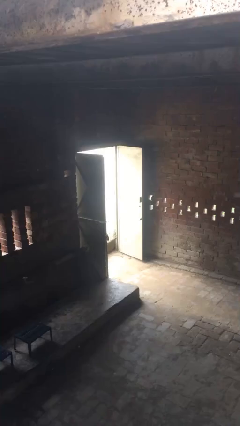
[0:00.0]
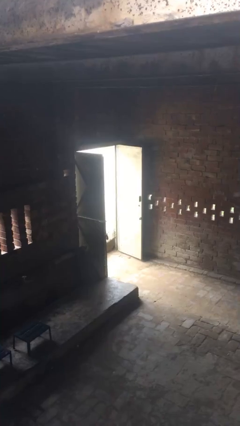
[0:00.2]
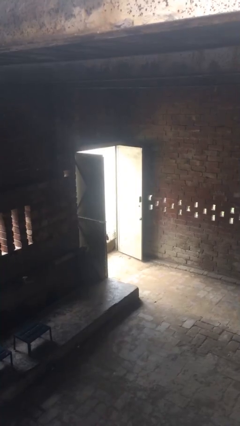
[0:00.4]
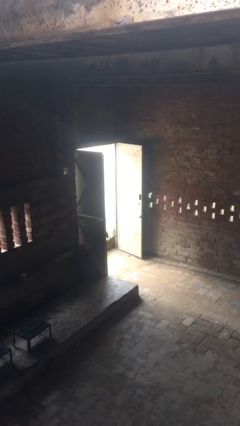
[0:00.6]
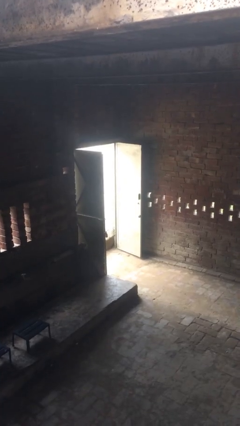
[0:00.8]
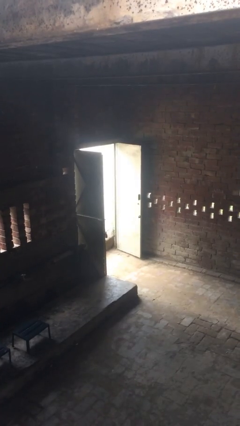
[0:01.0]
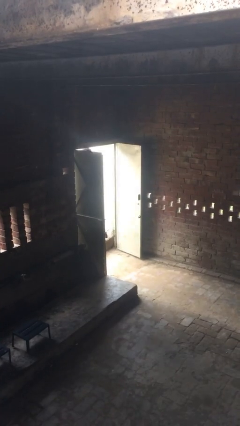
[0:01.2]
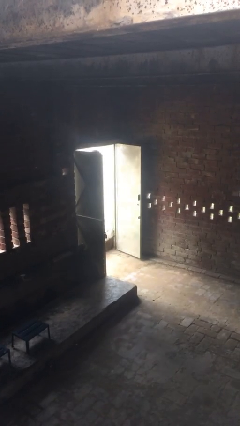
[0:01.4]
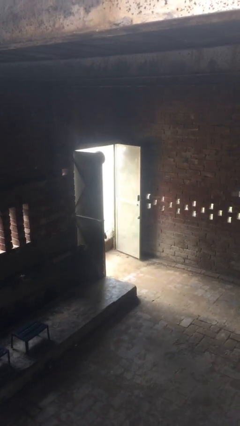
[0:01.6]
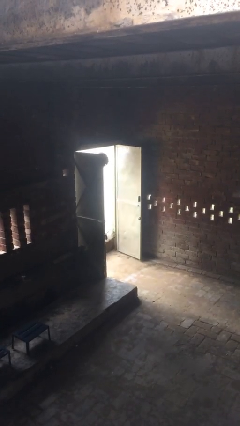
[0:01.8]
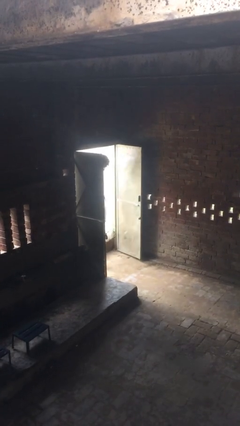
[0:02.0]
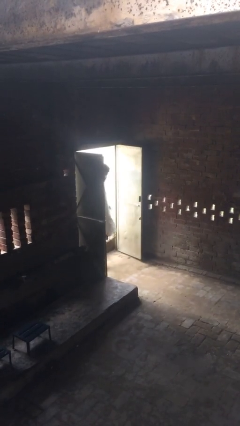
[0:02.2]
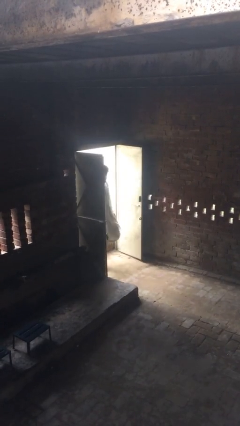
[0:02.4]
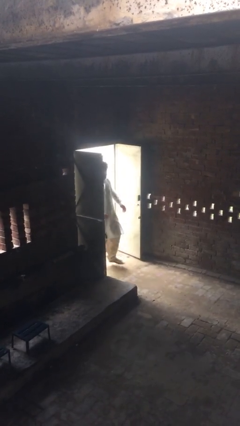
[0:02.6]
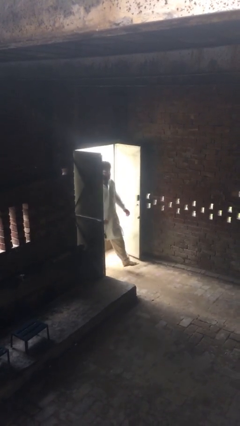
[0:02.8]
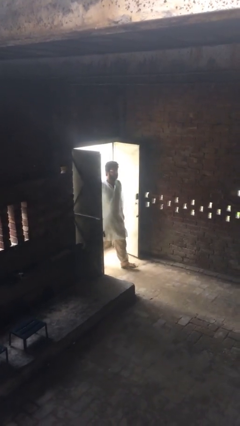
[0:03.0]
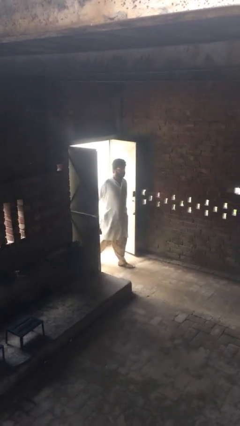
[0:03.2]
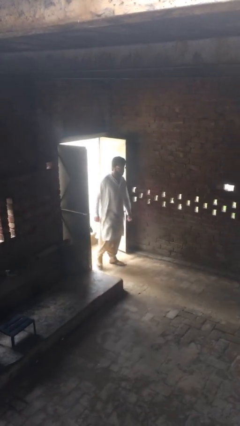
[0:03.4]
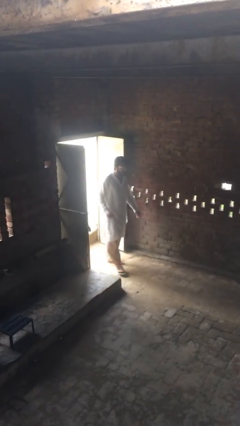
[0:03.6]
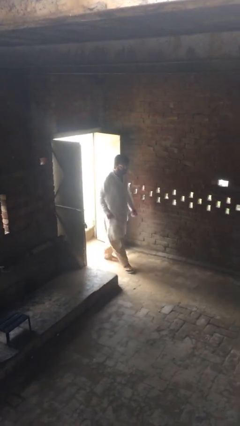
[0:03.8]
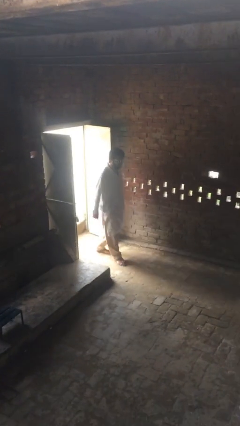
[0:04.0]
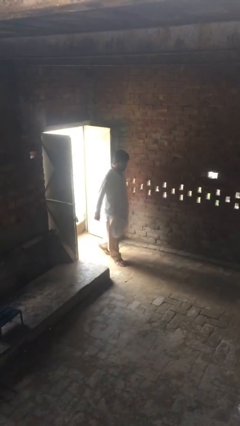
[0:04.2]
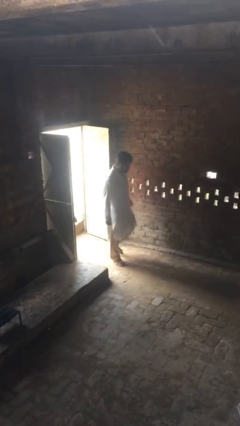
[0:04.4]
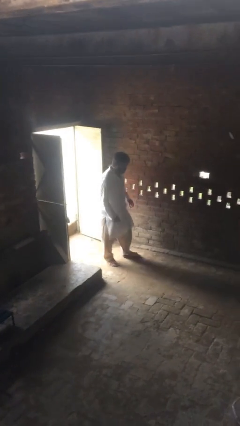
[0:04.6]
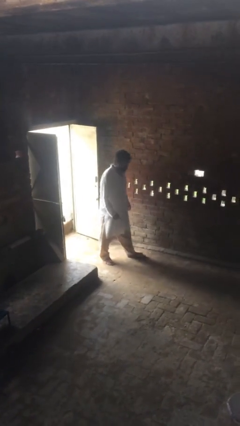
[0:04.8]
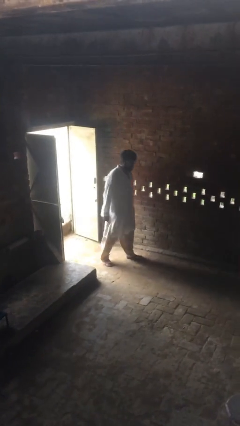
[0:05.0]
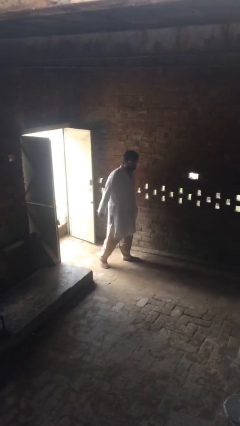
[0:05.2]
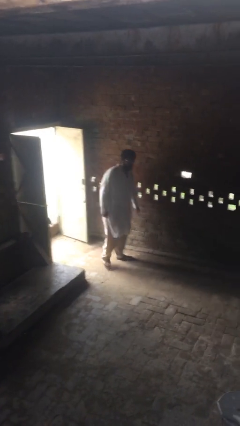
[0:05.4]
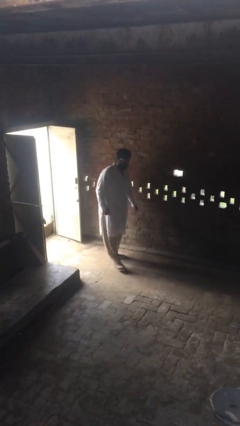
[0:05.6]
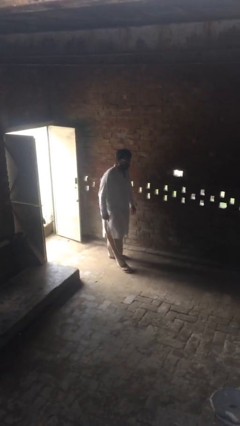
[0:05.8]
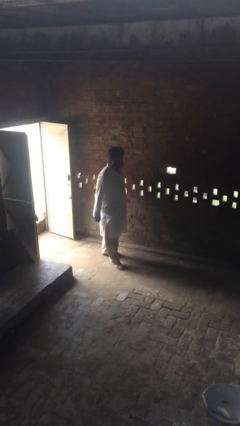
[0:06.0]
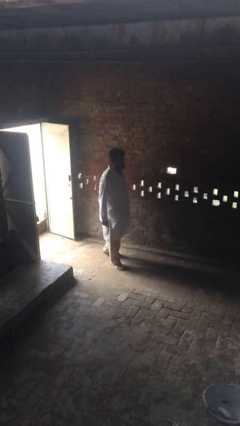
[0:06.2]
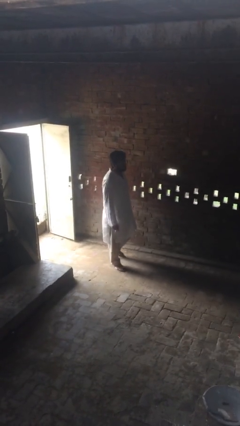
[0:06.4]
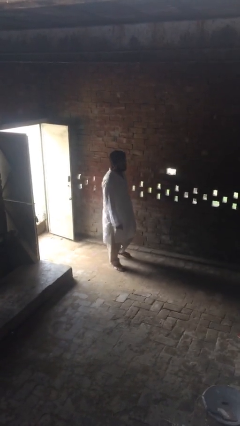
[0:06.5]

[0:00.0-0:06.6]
person enters scene through structure

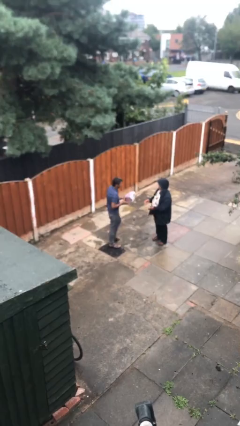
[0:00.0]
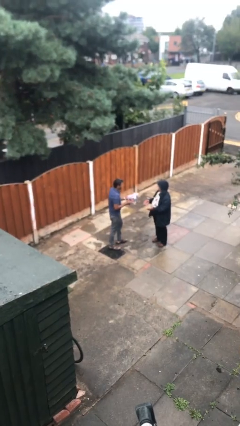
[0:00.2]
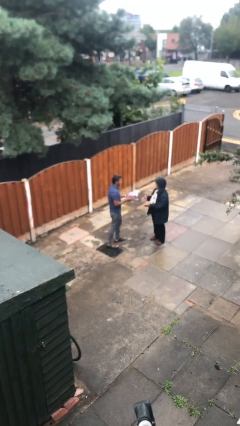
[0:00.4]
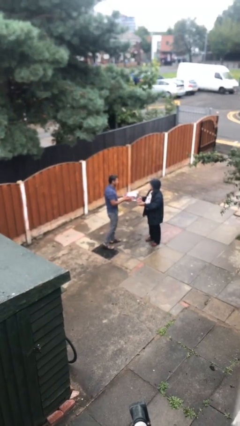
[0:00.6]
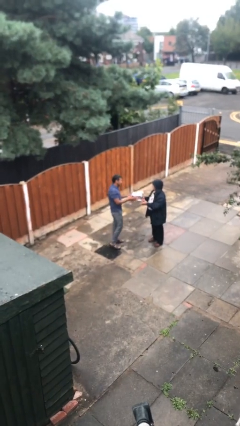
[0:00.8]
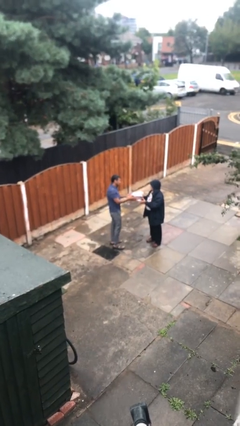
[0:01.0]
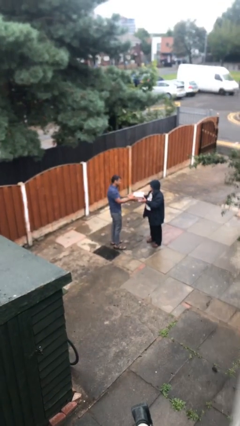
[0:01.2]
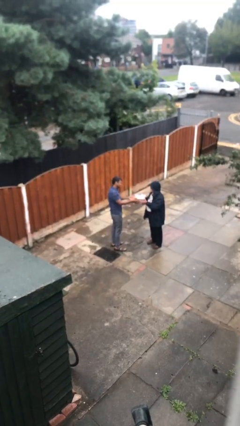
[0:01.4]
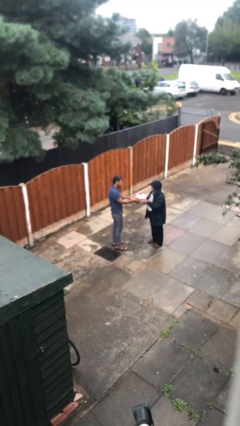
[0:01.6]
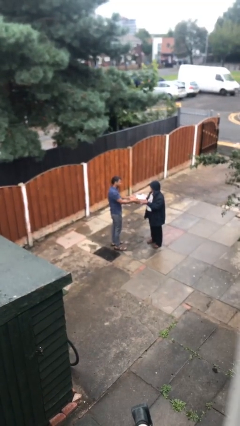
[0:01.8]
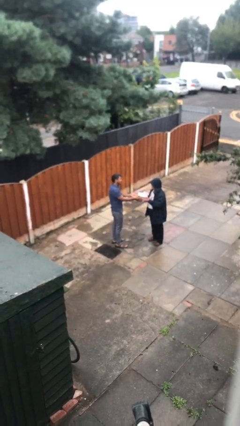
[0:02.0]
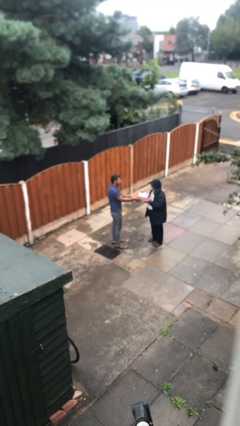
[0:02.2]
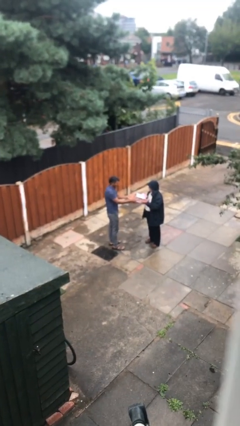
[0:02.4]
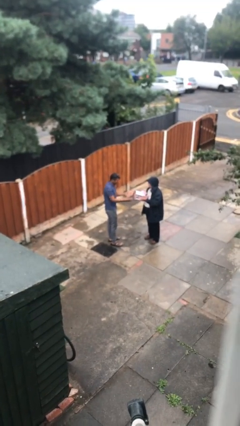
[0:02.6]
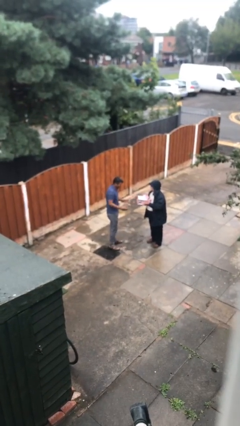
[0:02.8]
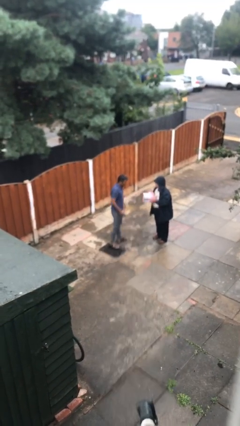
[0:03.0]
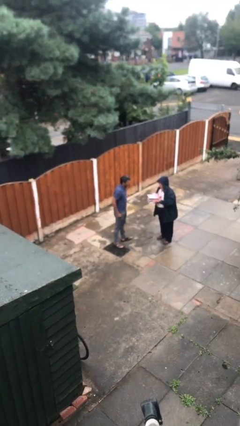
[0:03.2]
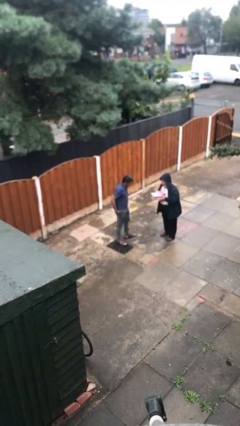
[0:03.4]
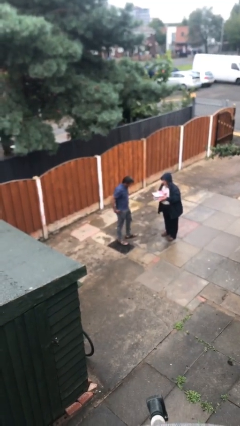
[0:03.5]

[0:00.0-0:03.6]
person transfers object to person

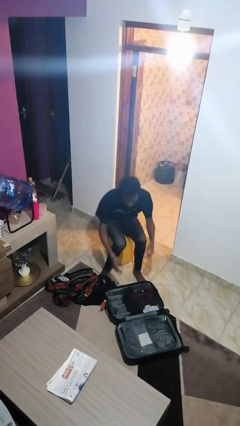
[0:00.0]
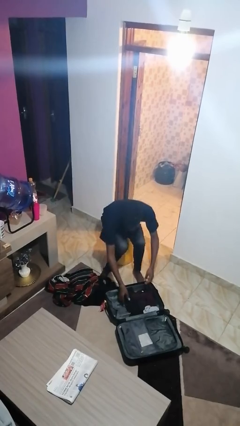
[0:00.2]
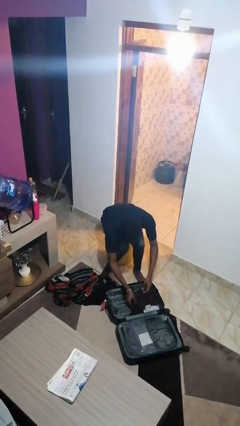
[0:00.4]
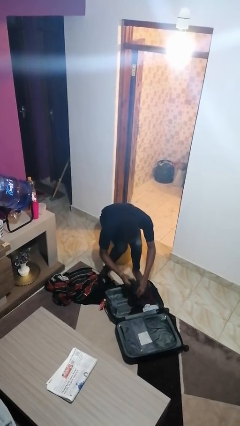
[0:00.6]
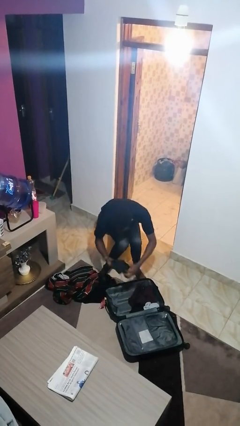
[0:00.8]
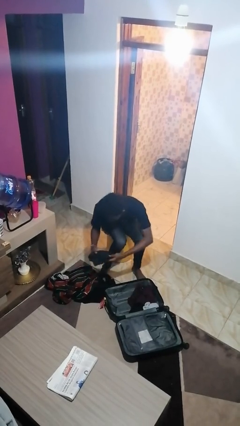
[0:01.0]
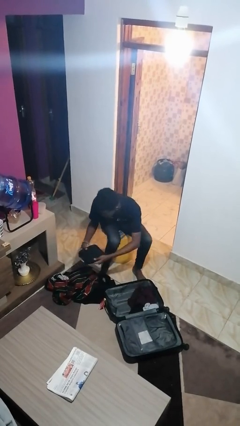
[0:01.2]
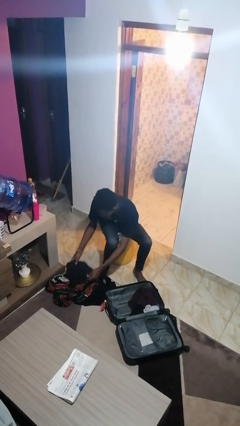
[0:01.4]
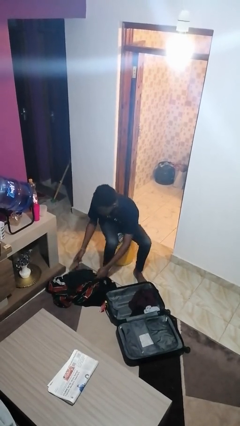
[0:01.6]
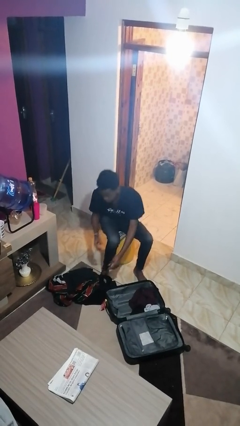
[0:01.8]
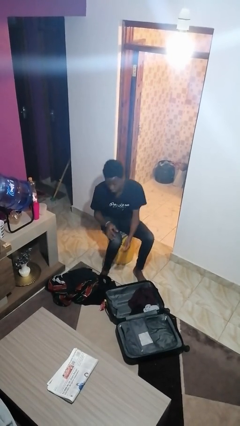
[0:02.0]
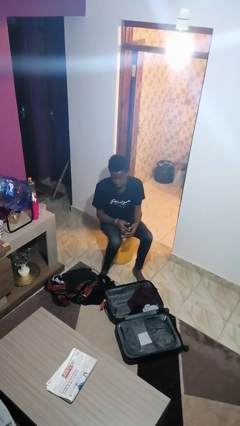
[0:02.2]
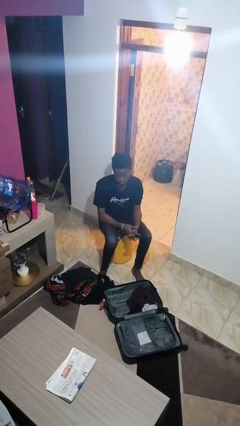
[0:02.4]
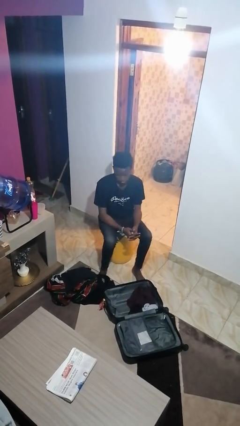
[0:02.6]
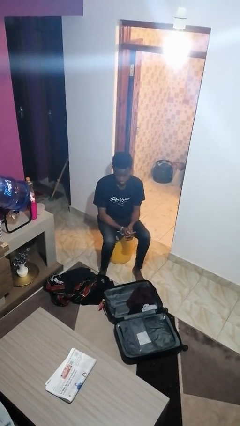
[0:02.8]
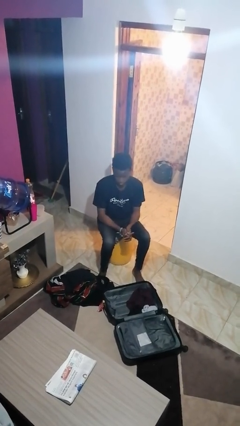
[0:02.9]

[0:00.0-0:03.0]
person unloads clothes from suitcase

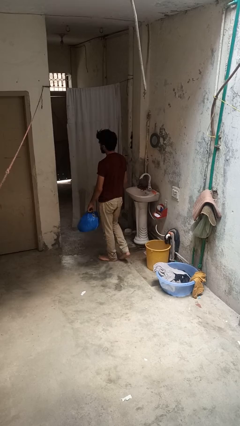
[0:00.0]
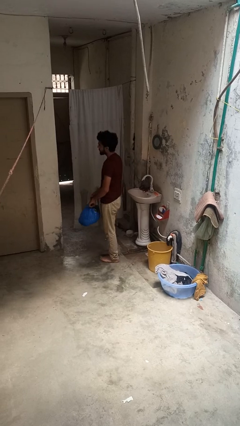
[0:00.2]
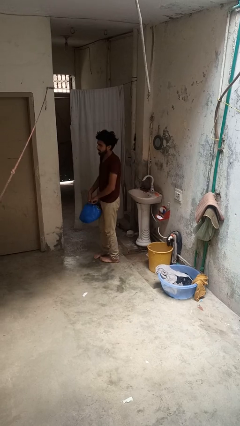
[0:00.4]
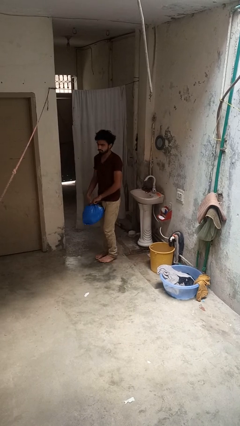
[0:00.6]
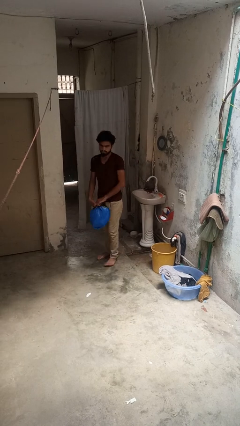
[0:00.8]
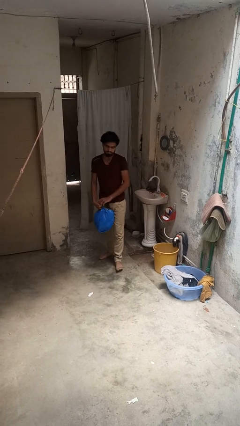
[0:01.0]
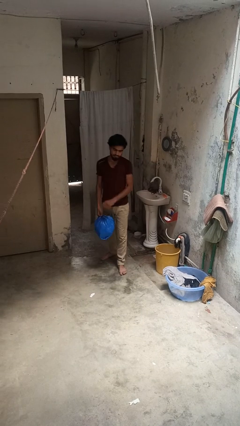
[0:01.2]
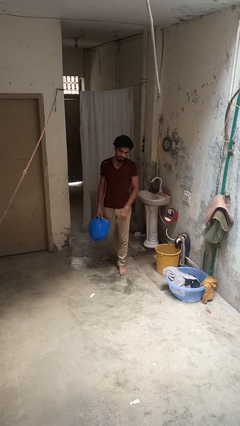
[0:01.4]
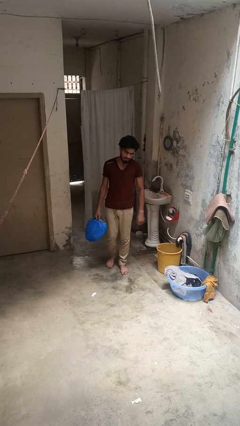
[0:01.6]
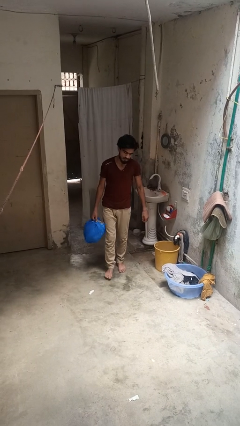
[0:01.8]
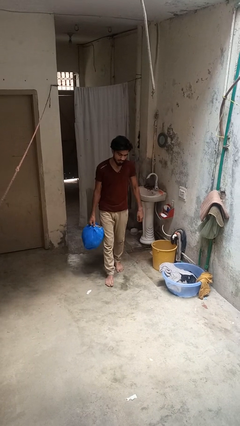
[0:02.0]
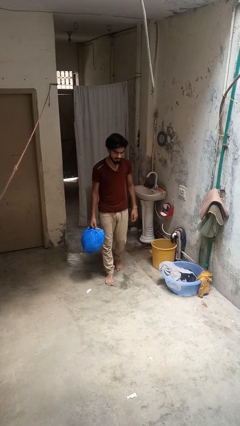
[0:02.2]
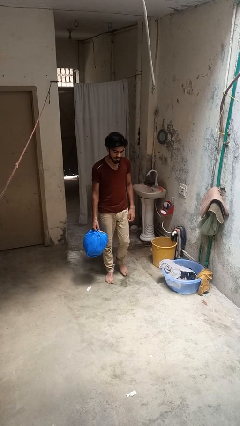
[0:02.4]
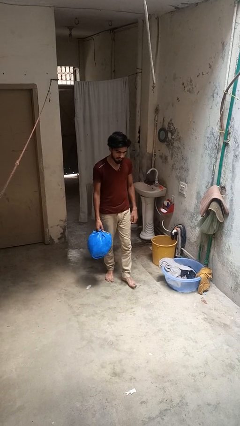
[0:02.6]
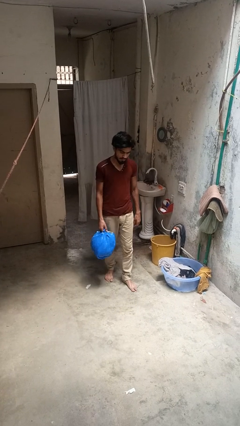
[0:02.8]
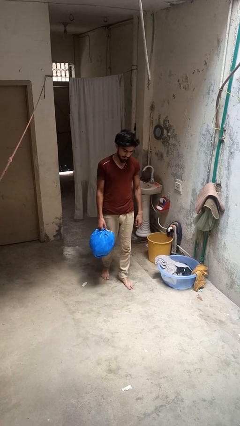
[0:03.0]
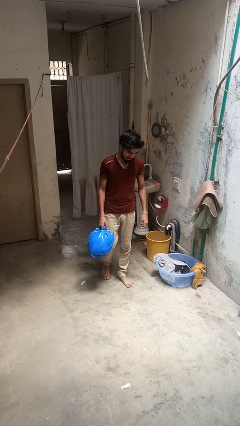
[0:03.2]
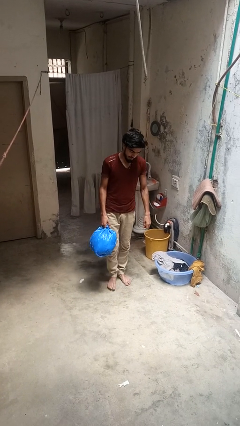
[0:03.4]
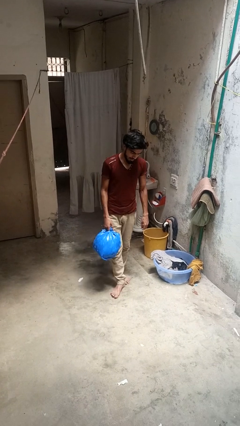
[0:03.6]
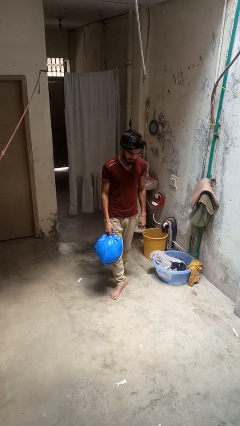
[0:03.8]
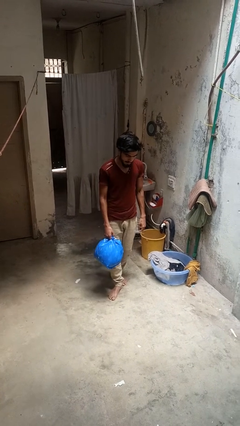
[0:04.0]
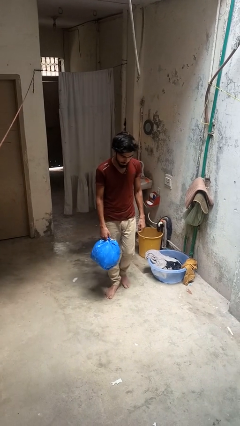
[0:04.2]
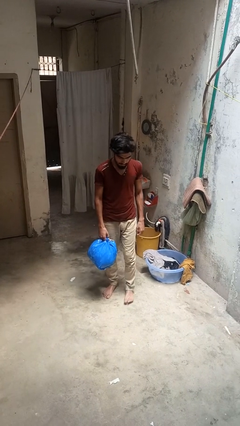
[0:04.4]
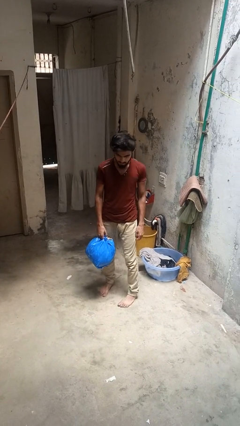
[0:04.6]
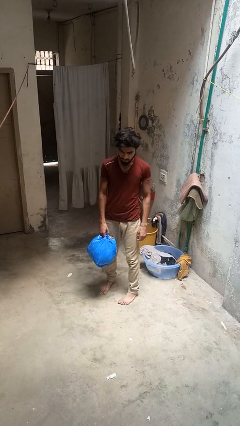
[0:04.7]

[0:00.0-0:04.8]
person carries groceries
